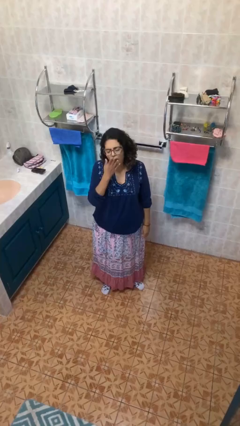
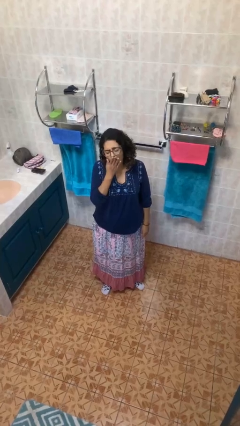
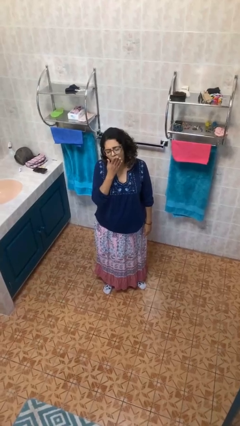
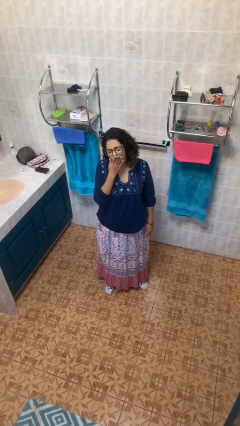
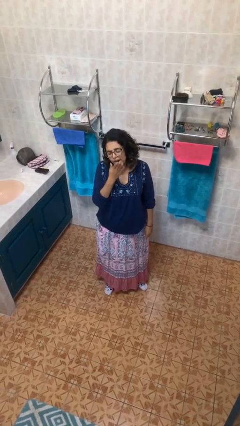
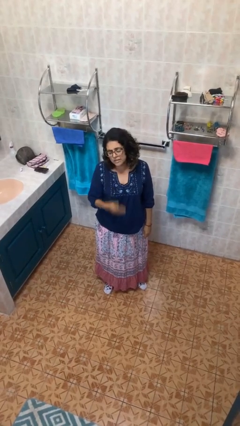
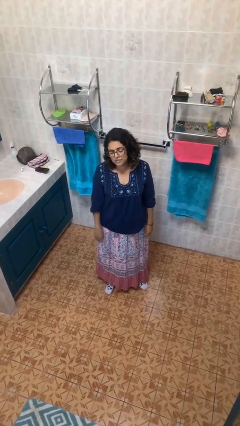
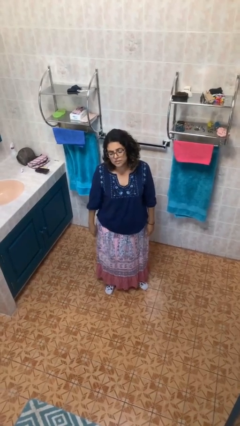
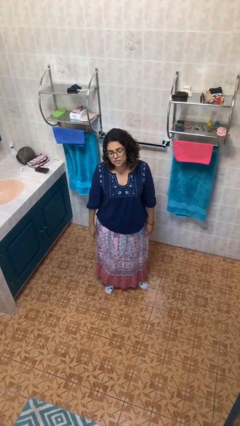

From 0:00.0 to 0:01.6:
person yawns

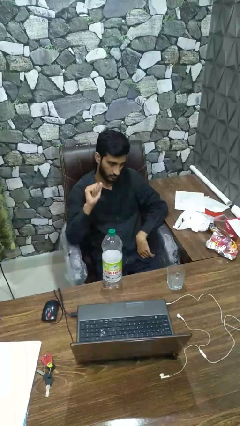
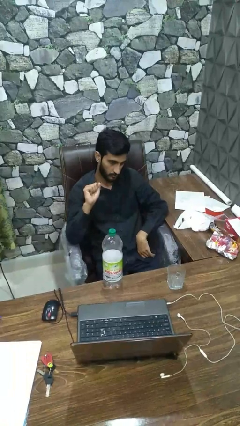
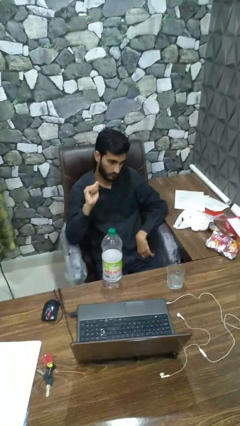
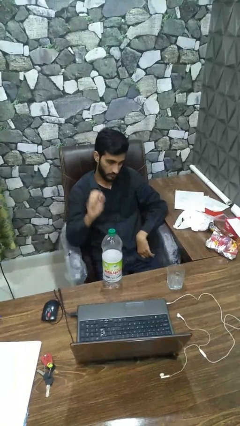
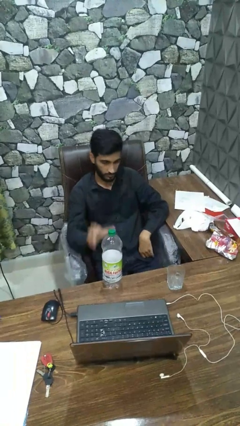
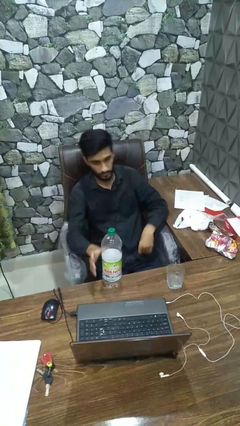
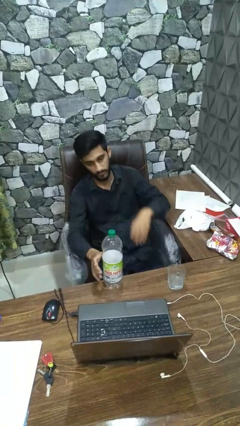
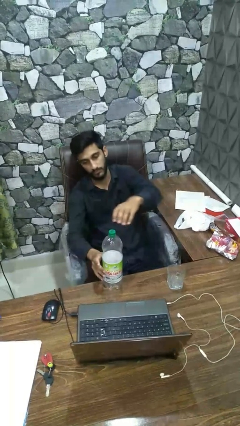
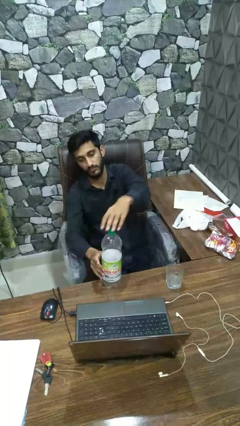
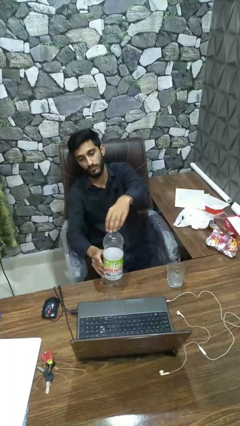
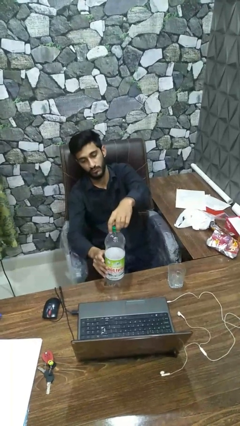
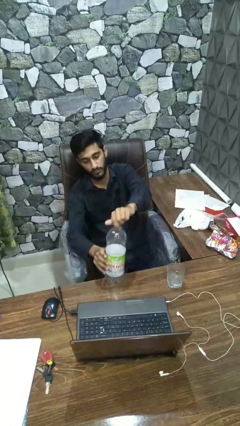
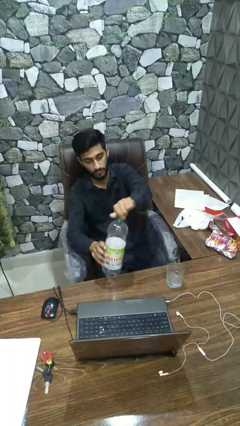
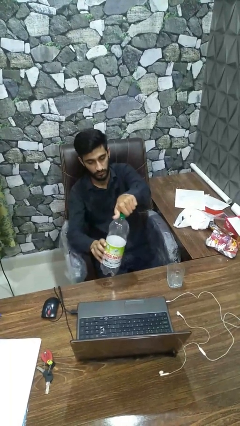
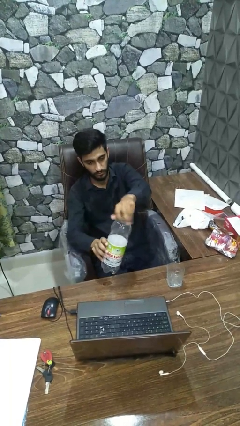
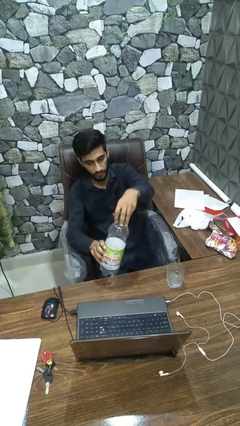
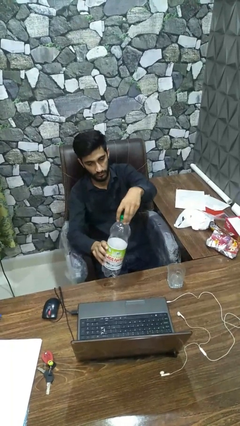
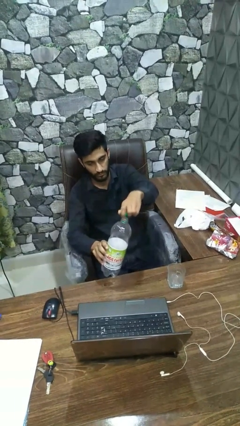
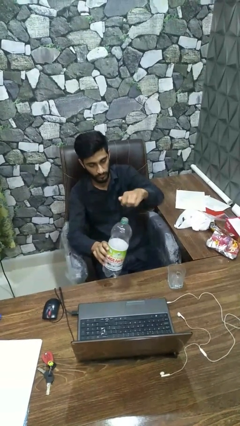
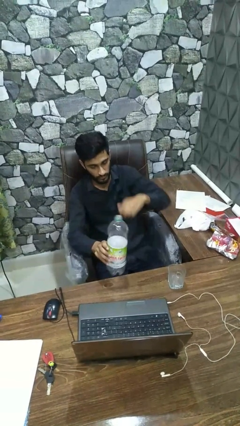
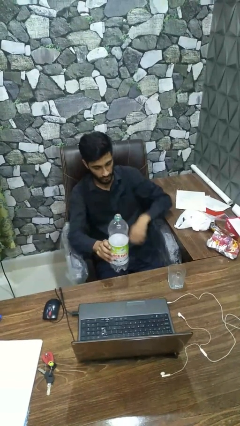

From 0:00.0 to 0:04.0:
person unscrews lid from bottle

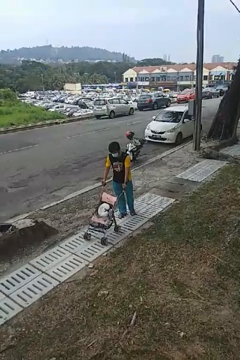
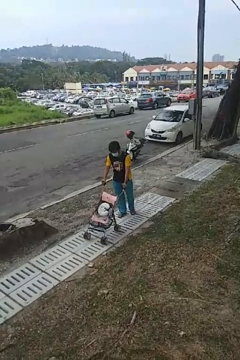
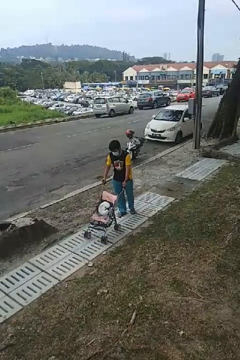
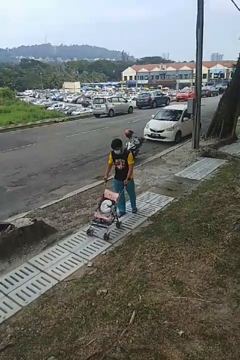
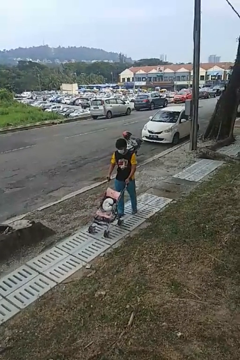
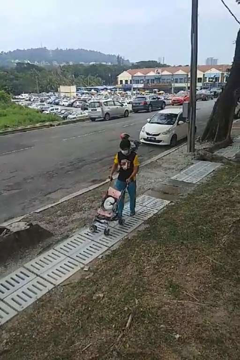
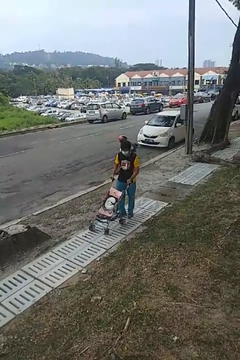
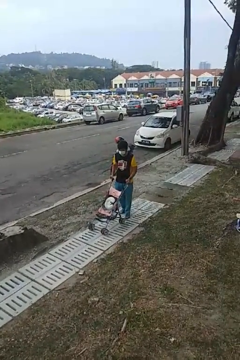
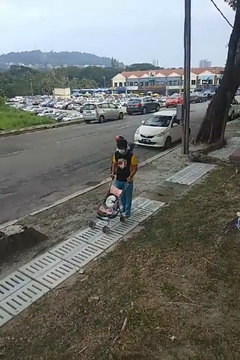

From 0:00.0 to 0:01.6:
person pulls wheeled cart

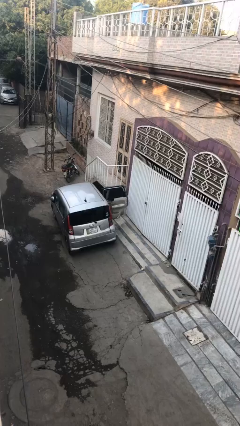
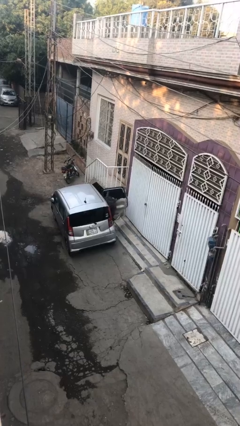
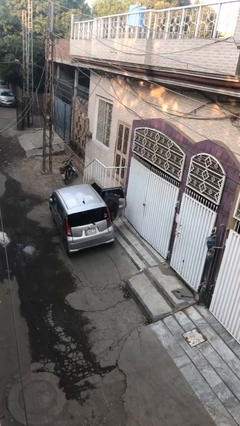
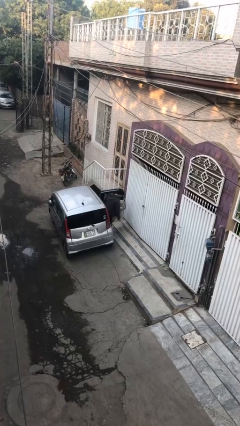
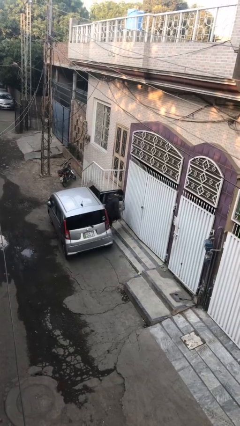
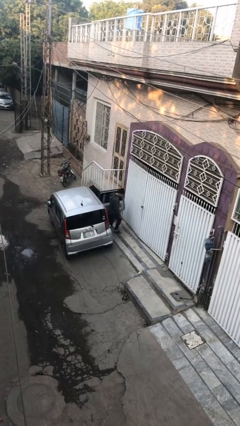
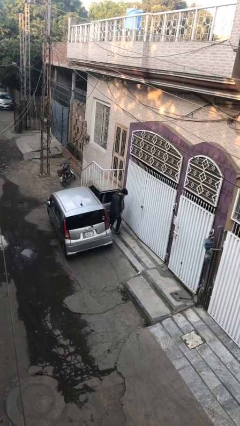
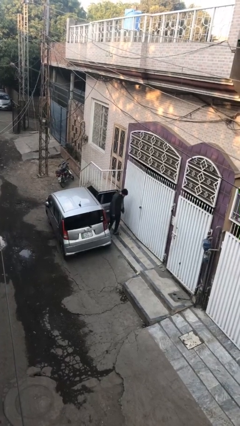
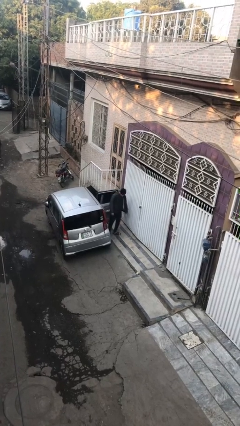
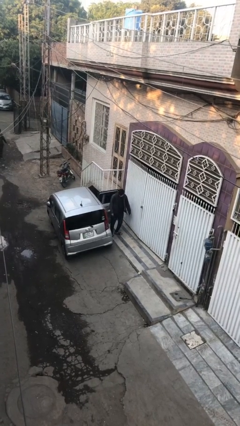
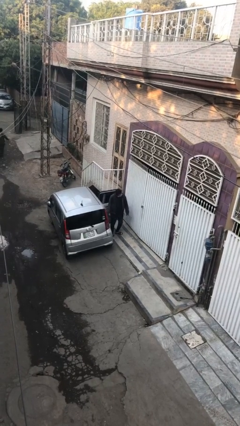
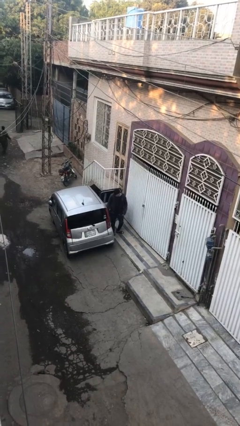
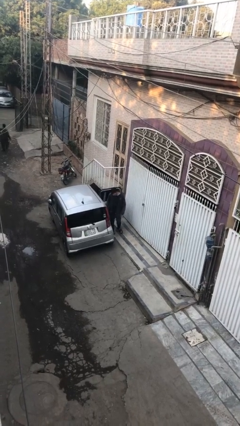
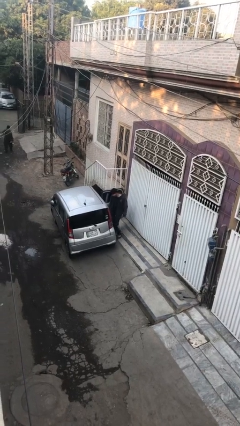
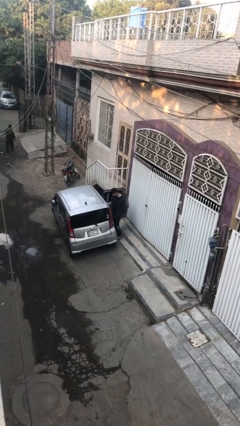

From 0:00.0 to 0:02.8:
person exits car

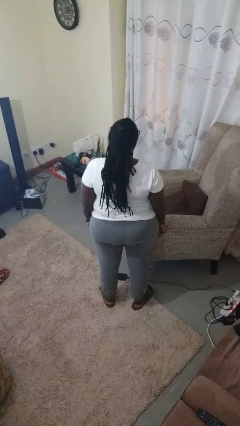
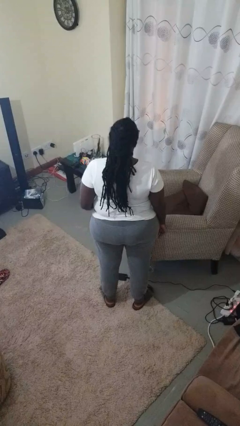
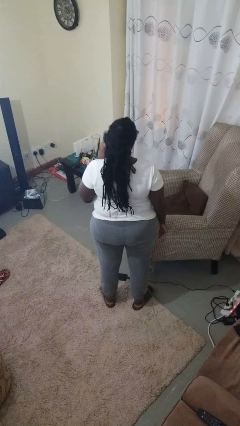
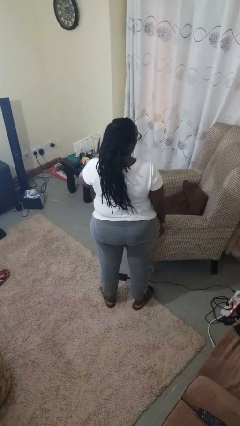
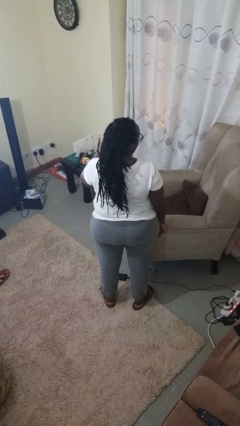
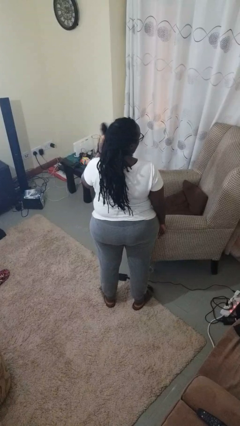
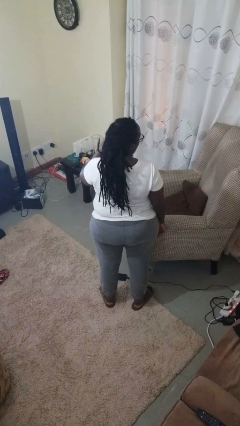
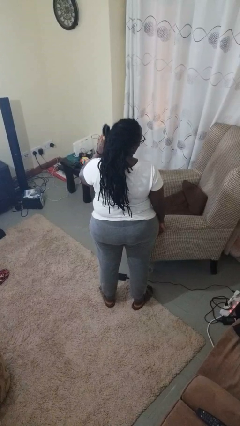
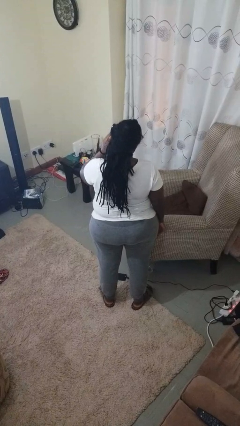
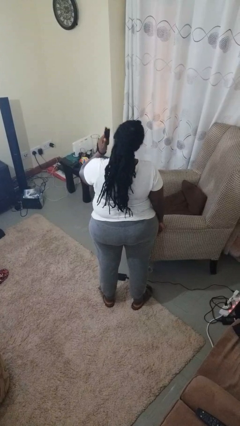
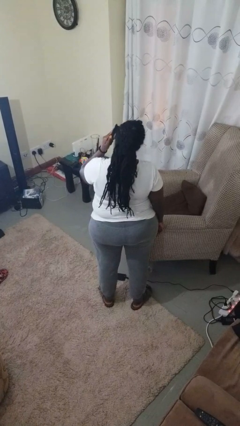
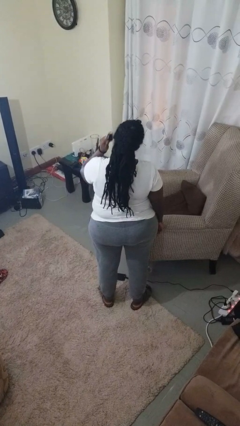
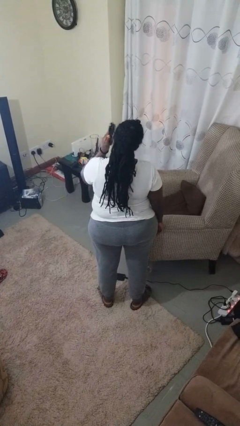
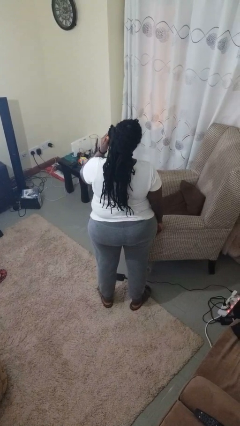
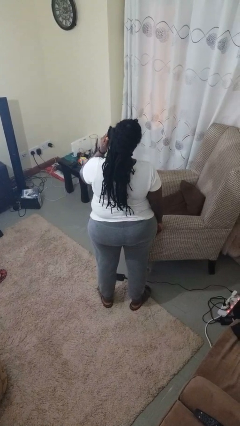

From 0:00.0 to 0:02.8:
person brushes hair

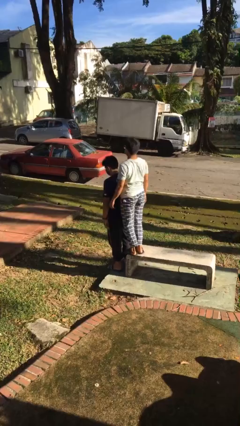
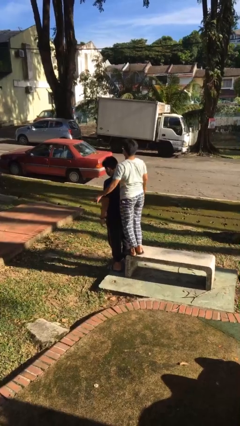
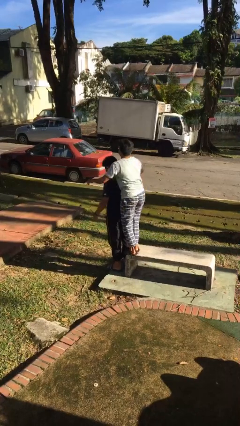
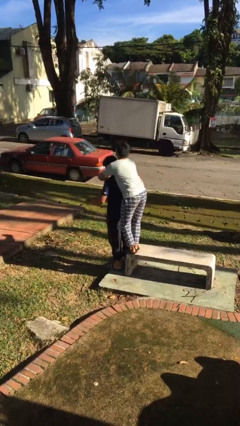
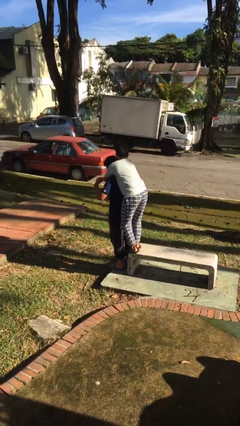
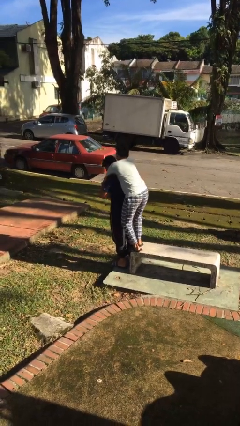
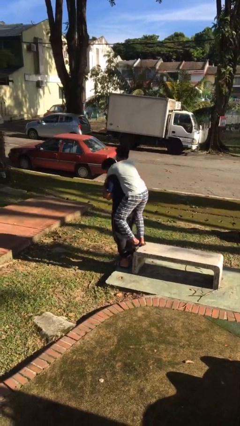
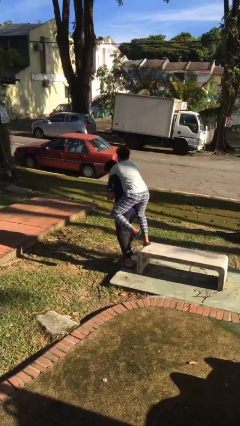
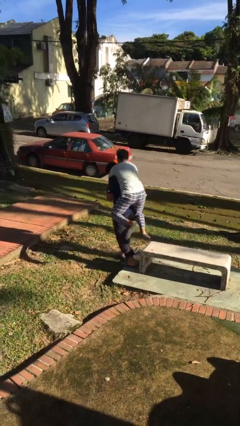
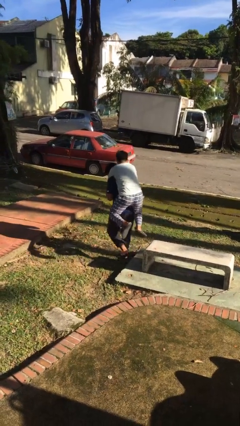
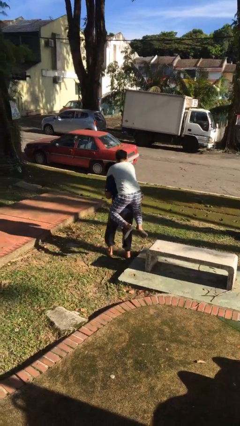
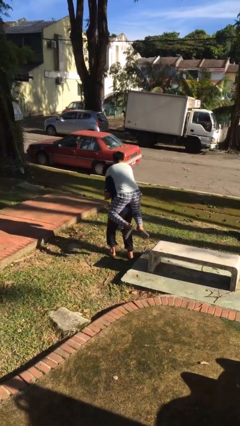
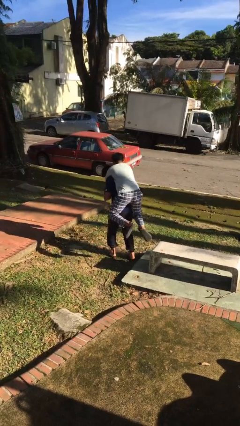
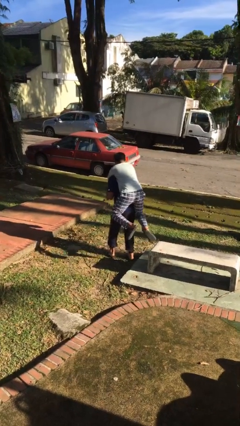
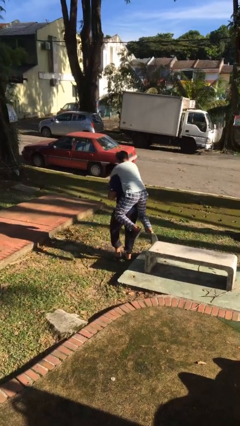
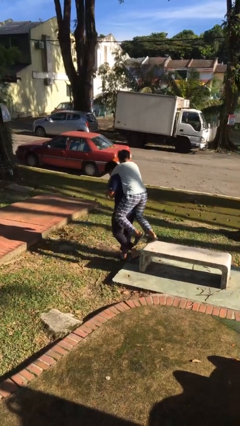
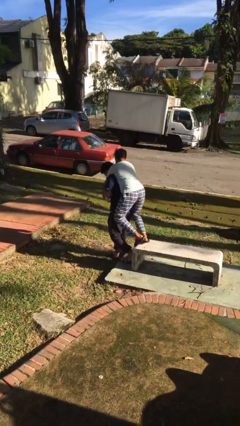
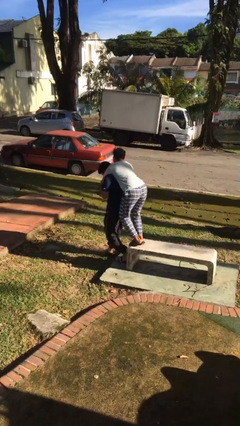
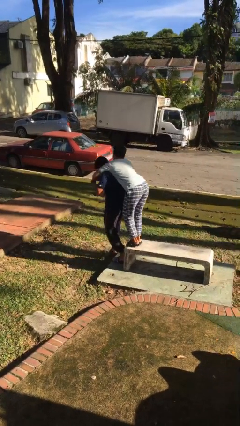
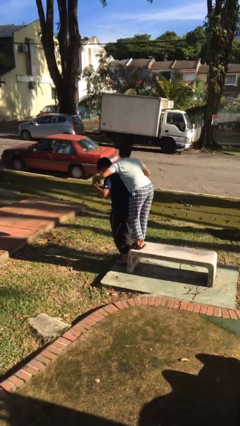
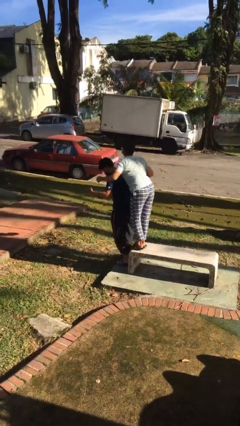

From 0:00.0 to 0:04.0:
person carries person on back

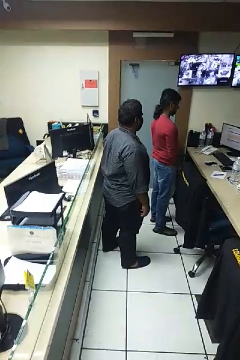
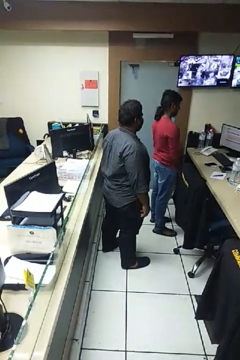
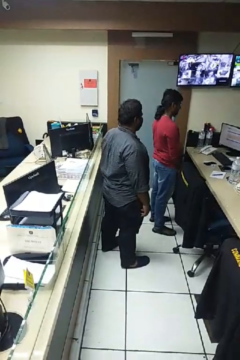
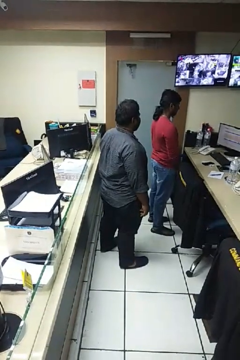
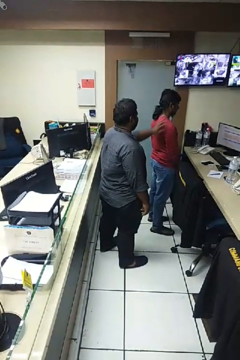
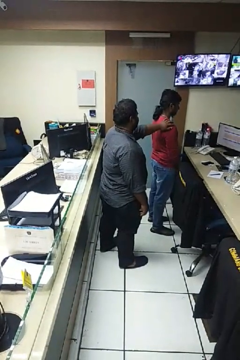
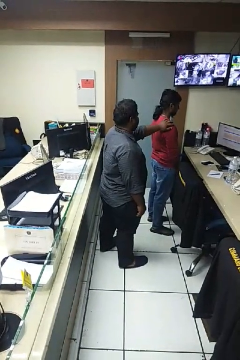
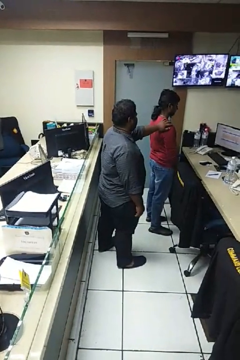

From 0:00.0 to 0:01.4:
person grabs person by shoulder
